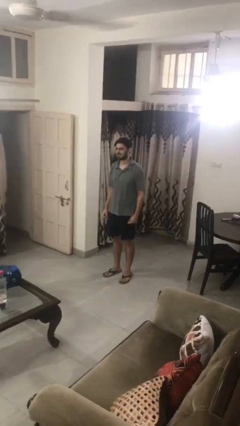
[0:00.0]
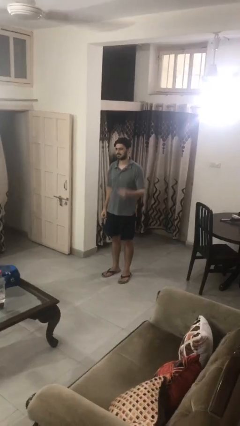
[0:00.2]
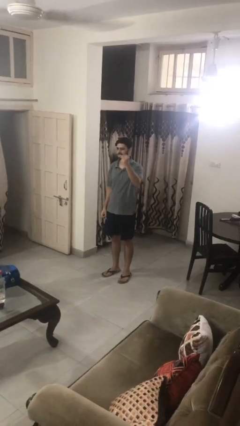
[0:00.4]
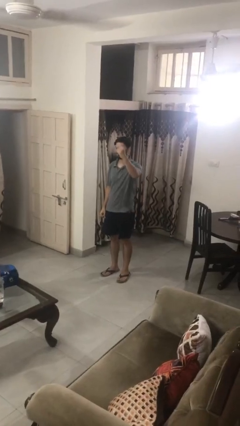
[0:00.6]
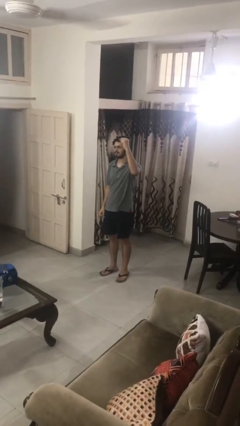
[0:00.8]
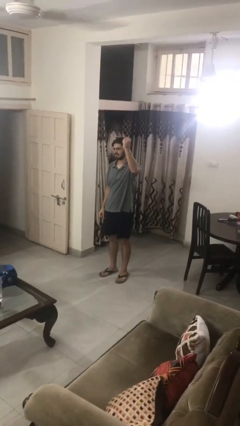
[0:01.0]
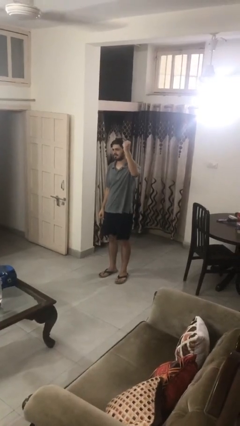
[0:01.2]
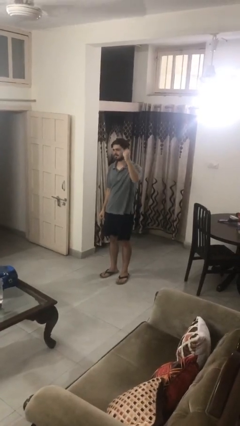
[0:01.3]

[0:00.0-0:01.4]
person snaps fingers

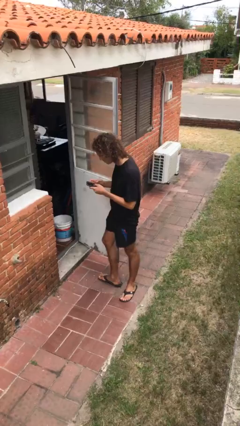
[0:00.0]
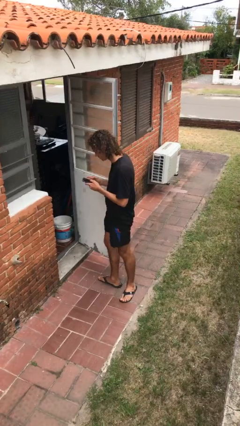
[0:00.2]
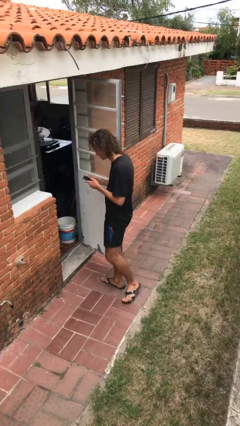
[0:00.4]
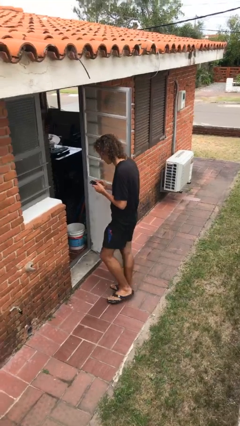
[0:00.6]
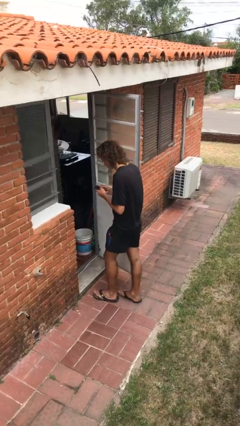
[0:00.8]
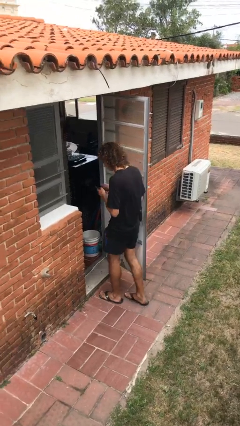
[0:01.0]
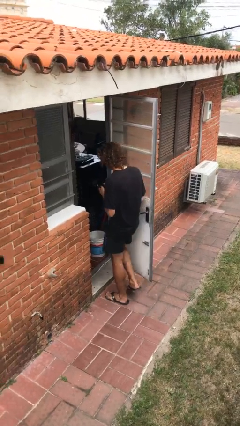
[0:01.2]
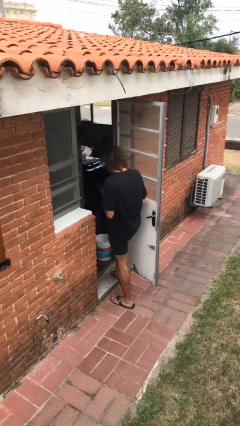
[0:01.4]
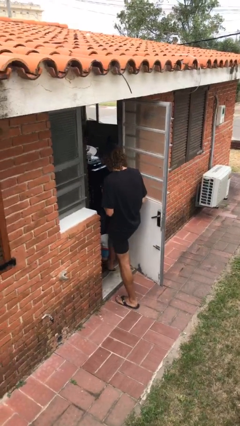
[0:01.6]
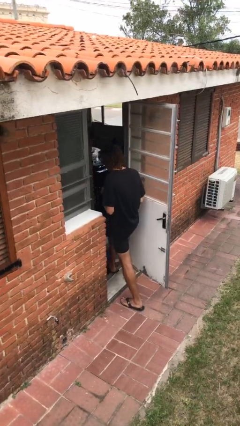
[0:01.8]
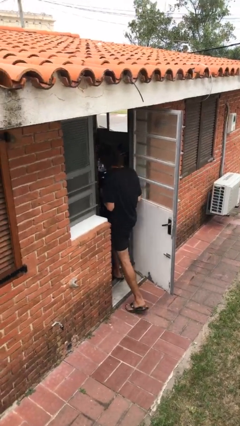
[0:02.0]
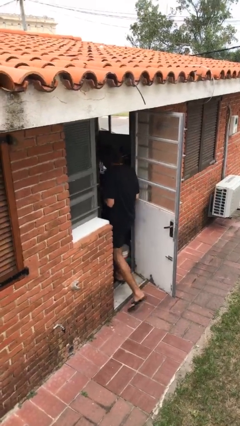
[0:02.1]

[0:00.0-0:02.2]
person exits scene through structure

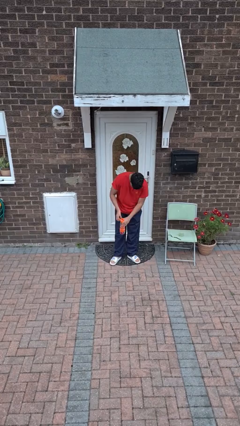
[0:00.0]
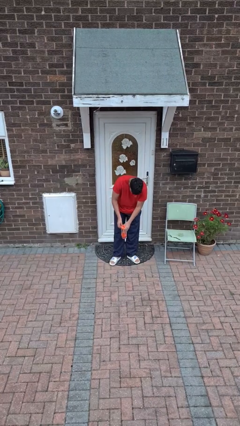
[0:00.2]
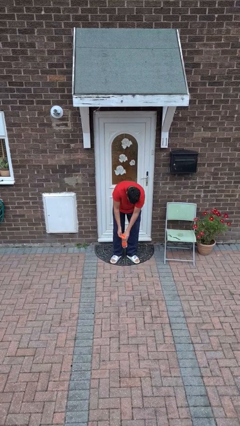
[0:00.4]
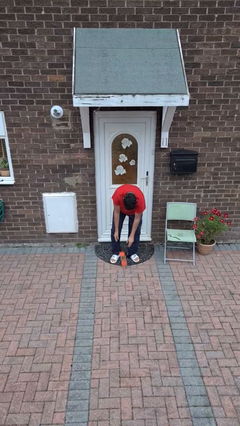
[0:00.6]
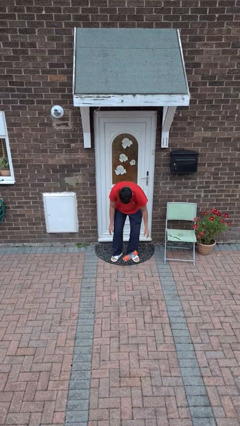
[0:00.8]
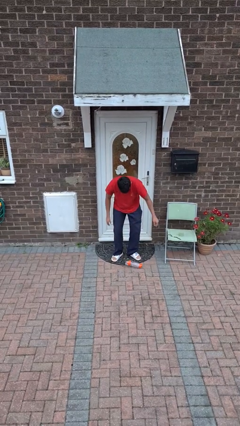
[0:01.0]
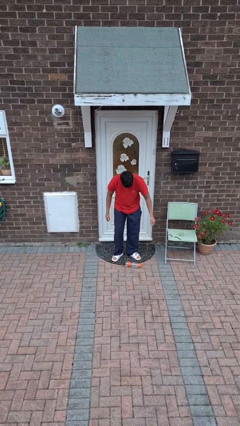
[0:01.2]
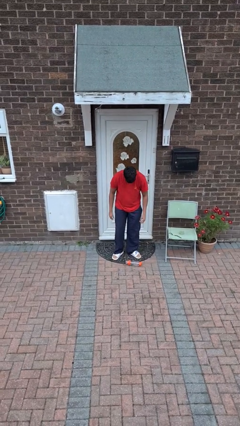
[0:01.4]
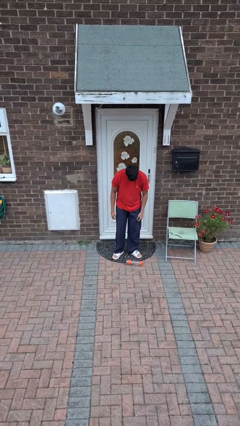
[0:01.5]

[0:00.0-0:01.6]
person drops object

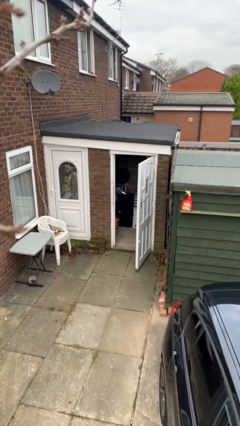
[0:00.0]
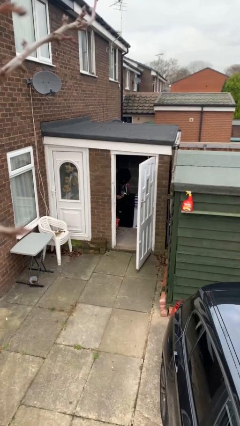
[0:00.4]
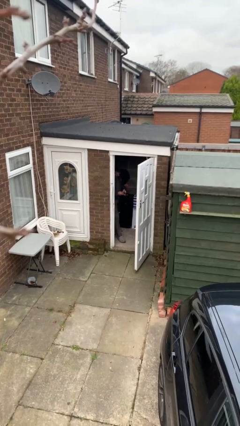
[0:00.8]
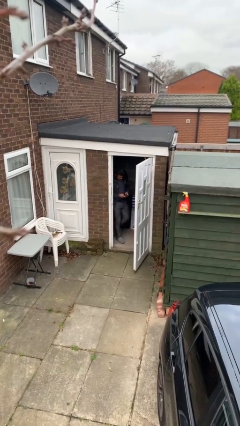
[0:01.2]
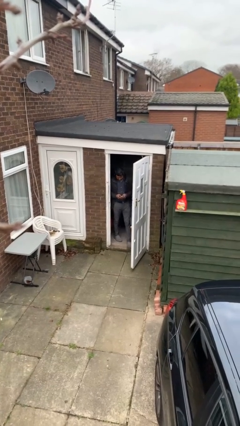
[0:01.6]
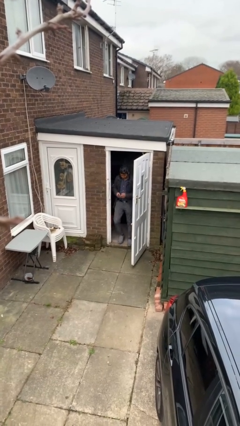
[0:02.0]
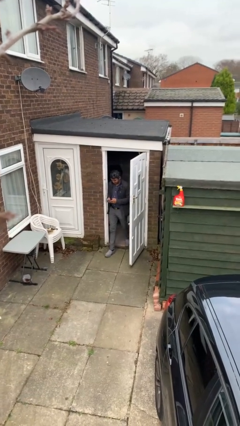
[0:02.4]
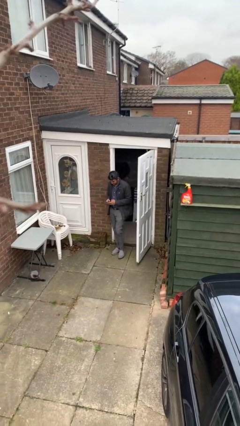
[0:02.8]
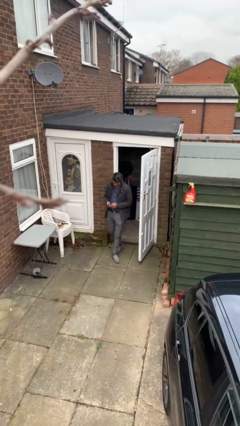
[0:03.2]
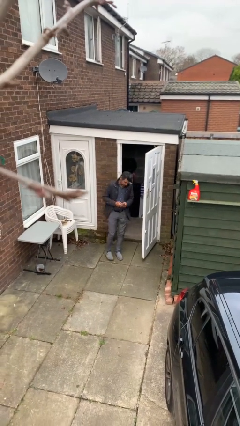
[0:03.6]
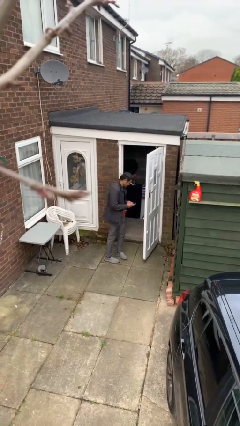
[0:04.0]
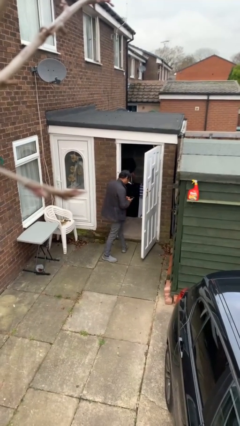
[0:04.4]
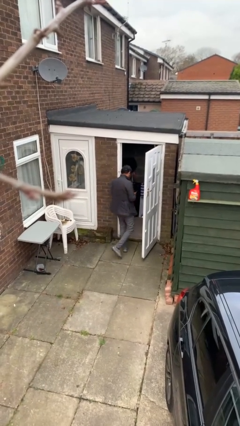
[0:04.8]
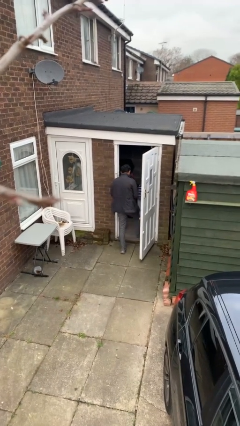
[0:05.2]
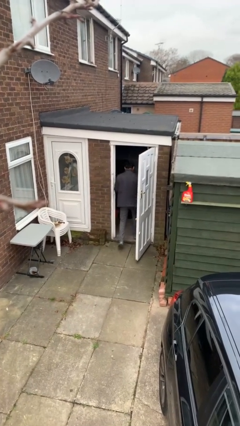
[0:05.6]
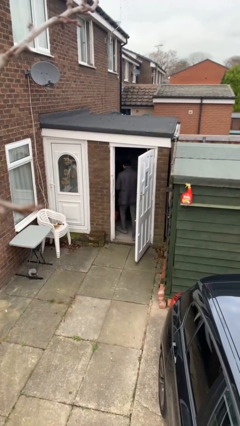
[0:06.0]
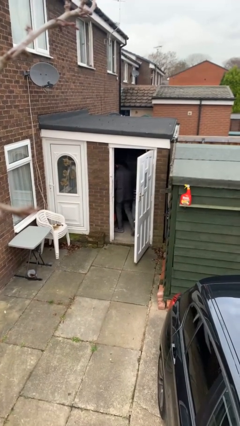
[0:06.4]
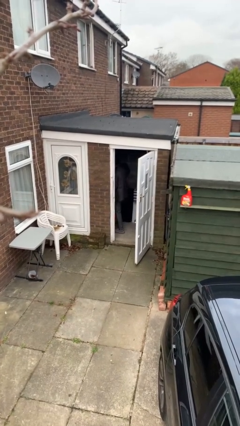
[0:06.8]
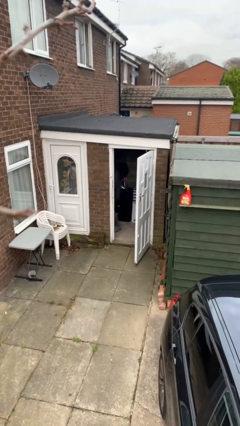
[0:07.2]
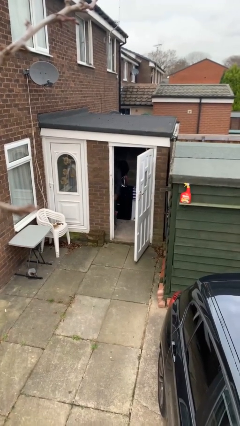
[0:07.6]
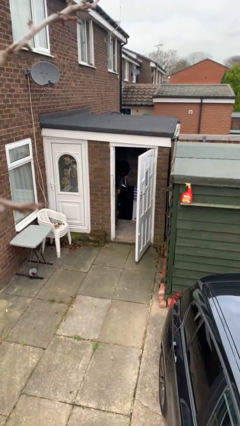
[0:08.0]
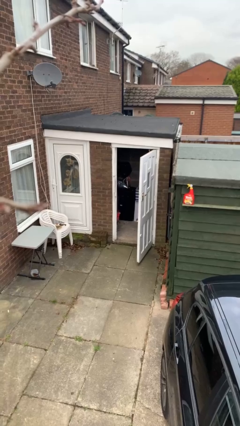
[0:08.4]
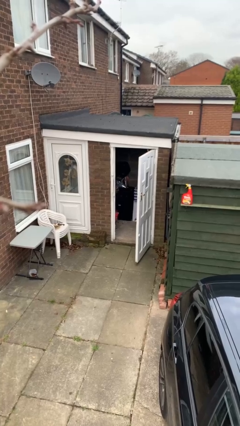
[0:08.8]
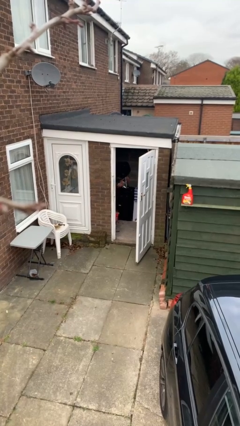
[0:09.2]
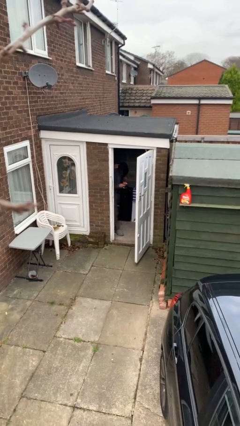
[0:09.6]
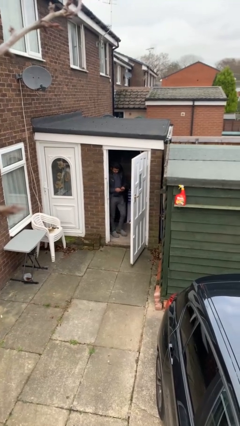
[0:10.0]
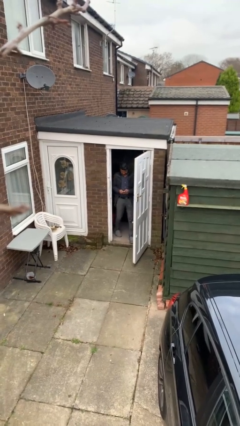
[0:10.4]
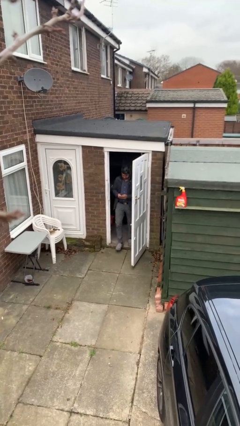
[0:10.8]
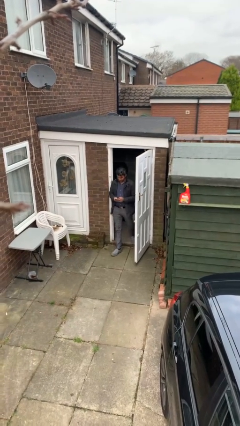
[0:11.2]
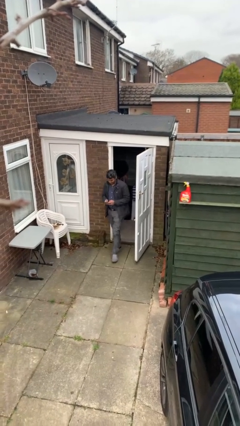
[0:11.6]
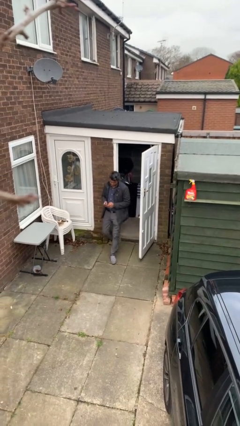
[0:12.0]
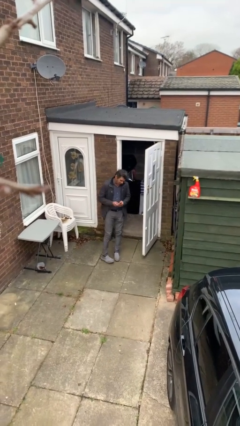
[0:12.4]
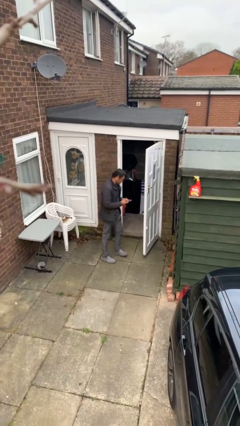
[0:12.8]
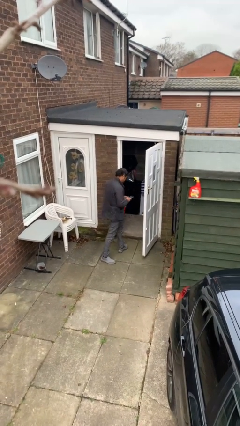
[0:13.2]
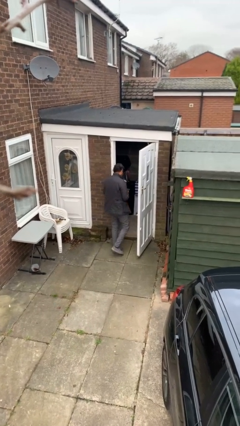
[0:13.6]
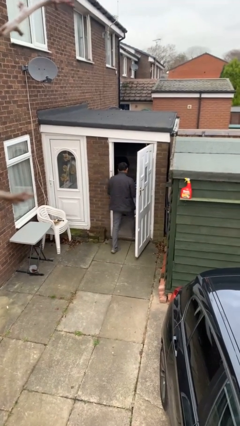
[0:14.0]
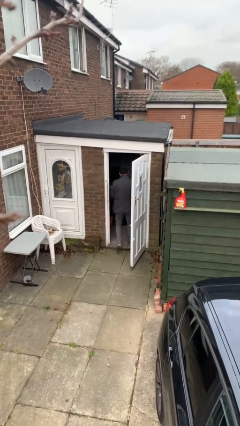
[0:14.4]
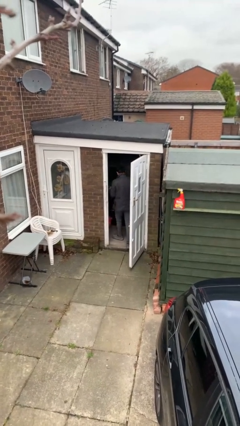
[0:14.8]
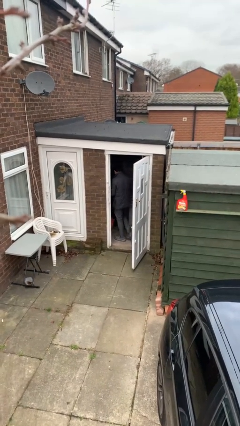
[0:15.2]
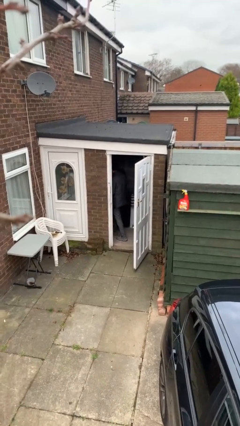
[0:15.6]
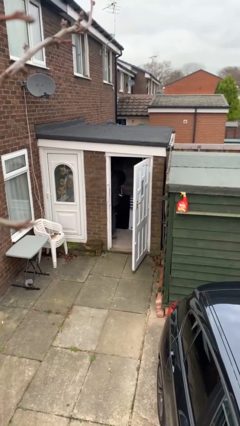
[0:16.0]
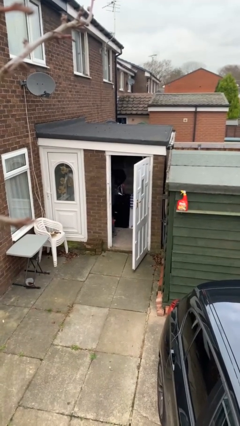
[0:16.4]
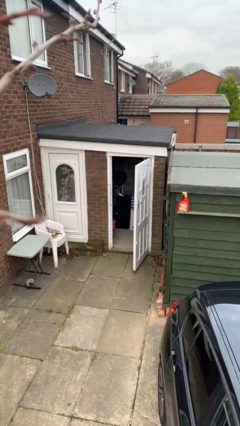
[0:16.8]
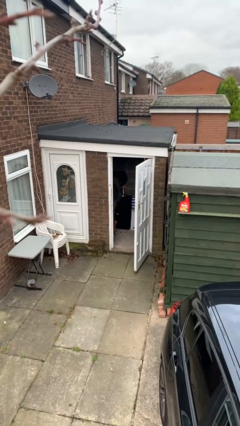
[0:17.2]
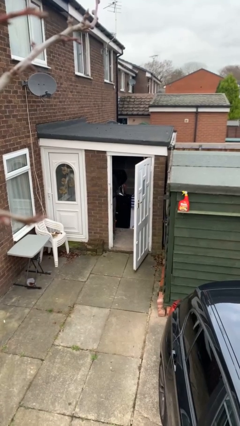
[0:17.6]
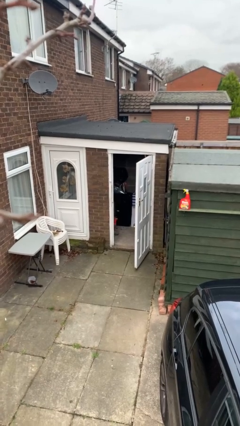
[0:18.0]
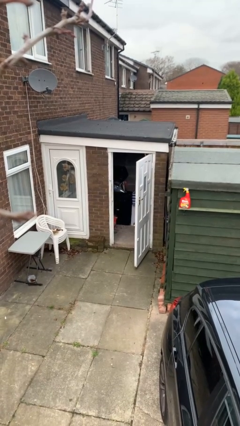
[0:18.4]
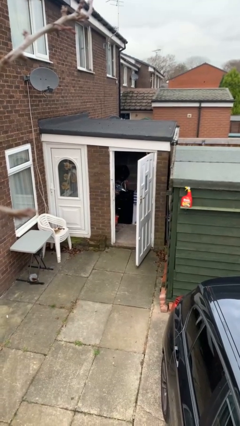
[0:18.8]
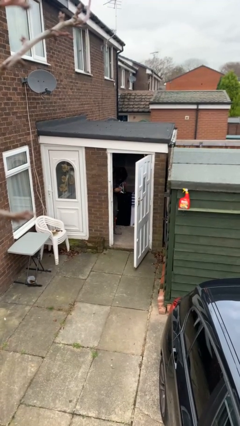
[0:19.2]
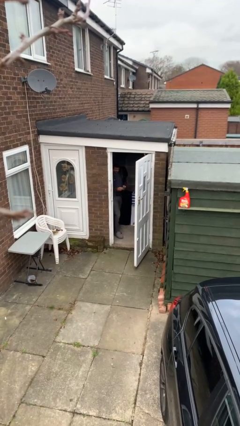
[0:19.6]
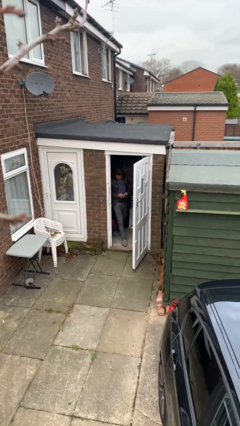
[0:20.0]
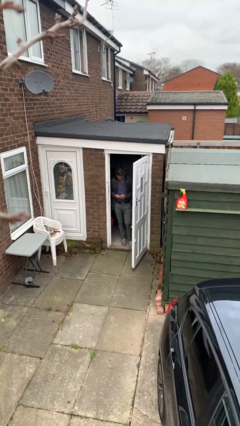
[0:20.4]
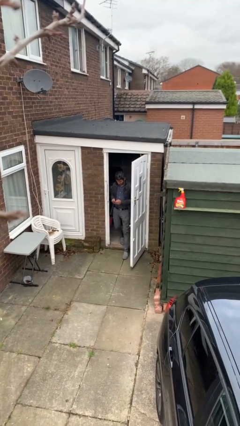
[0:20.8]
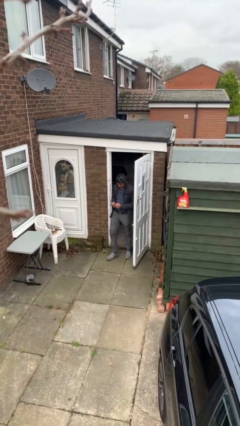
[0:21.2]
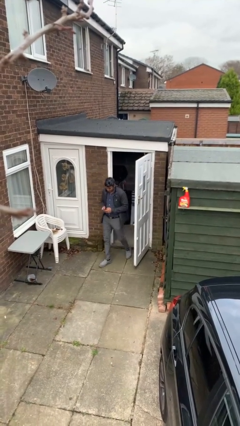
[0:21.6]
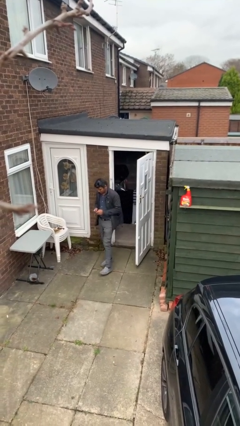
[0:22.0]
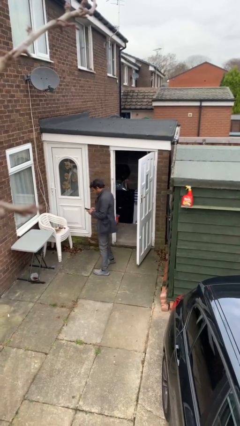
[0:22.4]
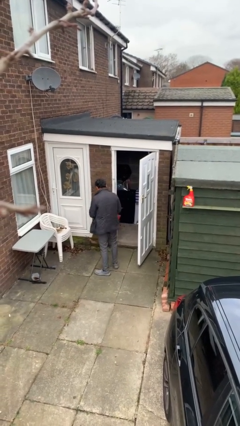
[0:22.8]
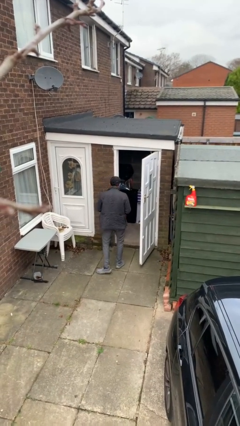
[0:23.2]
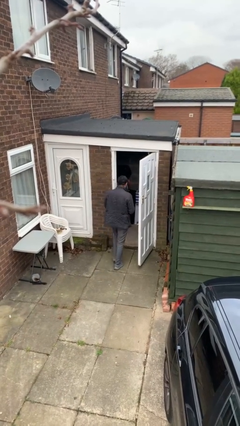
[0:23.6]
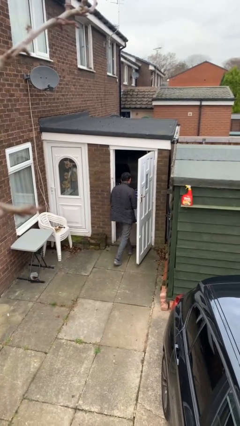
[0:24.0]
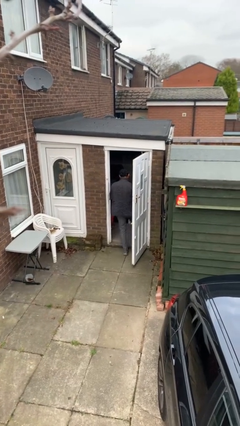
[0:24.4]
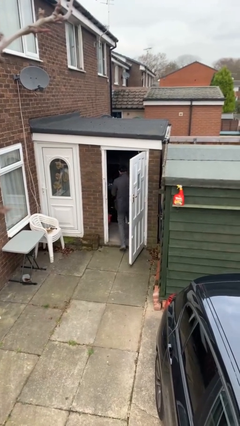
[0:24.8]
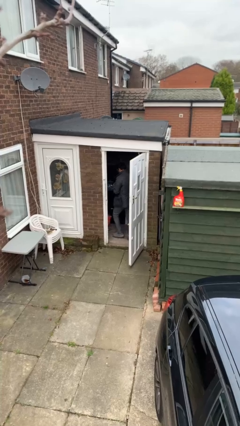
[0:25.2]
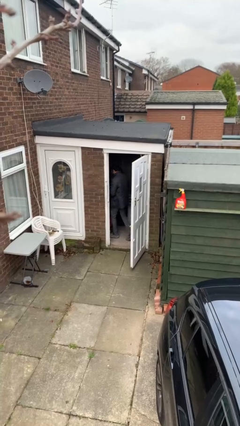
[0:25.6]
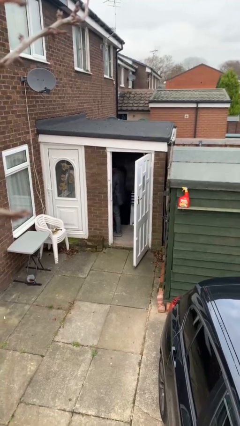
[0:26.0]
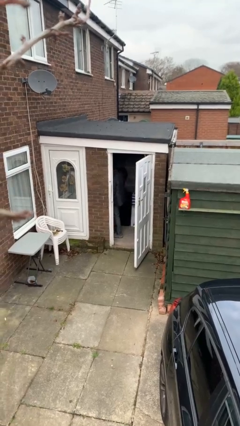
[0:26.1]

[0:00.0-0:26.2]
person texts on phone
